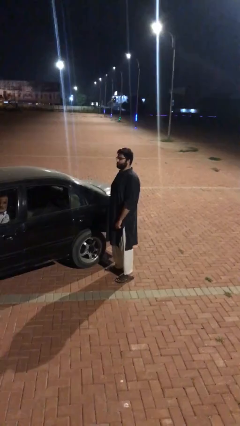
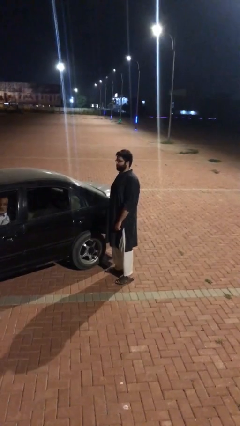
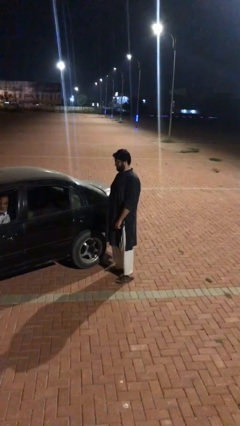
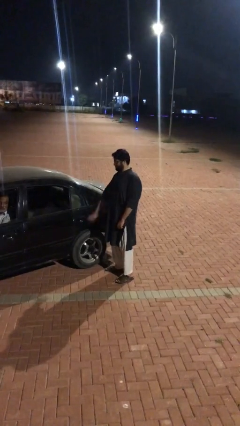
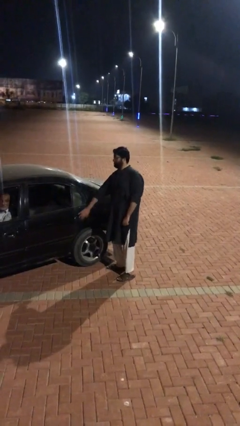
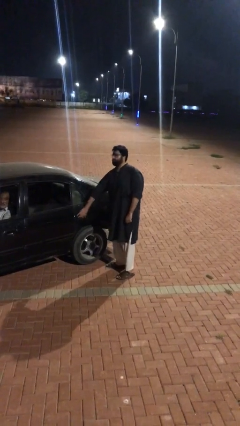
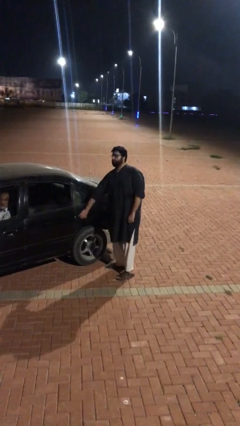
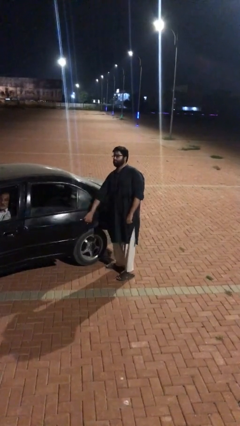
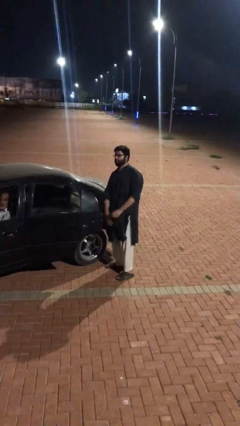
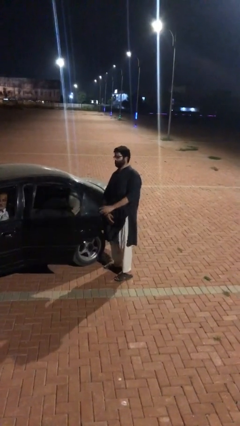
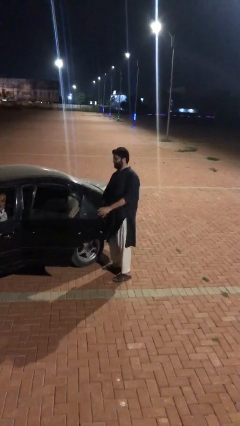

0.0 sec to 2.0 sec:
person opens car door

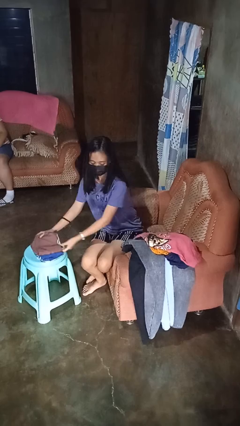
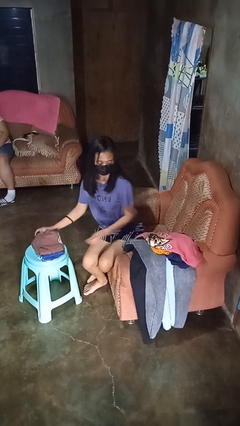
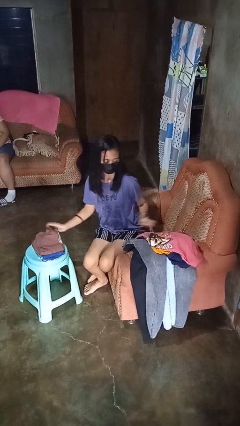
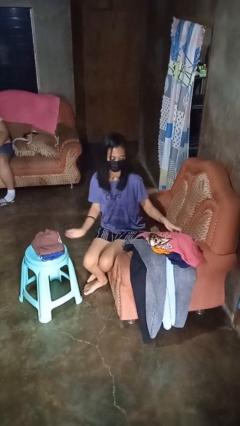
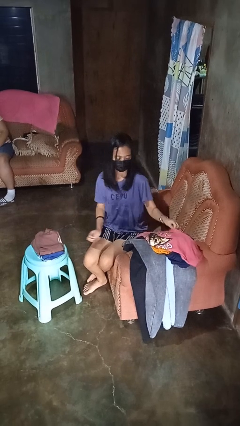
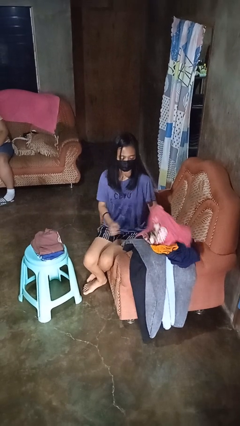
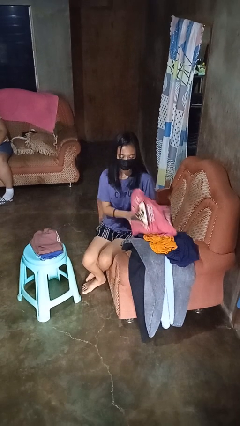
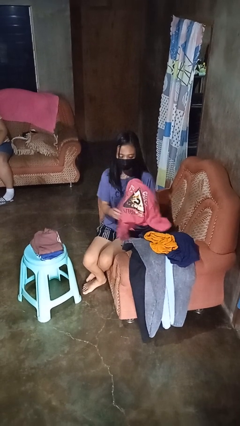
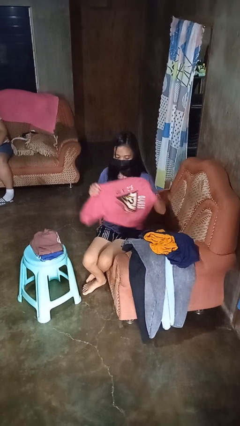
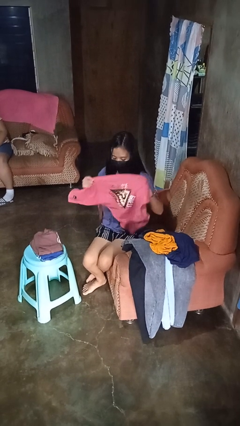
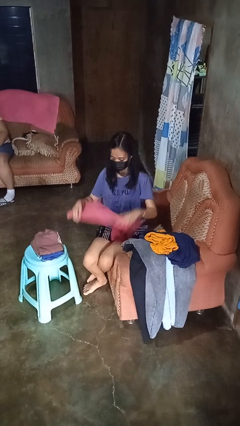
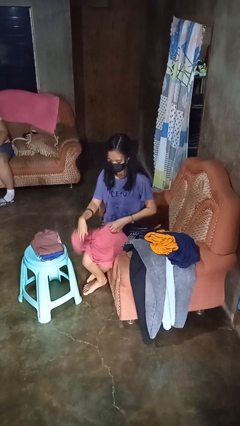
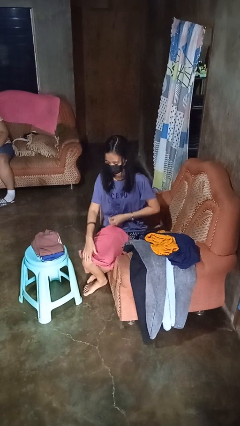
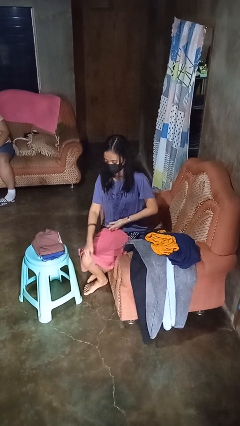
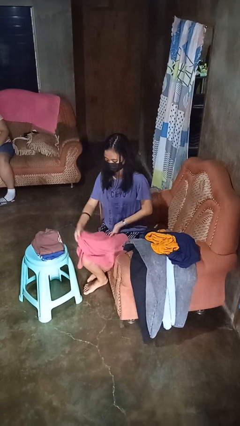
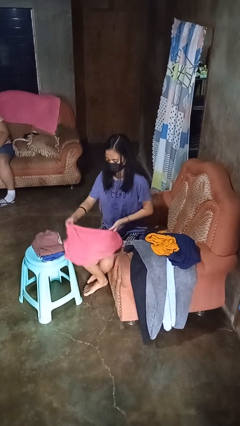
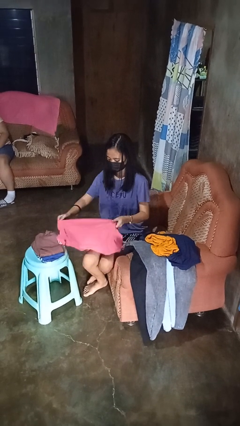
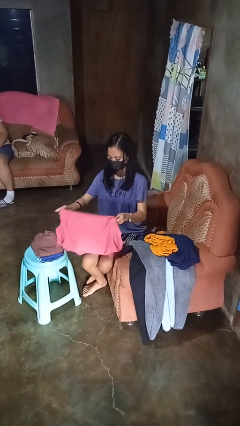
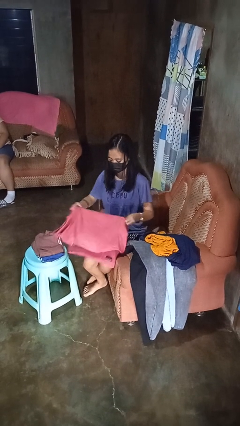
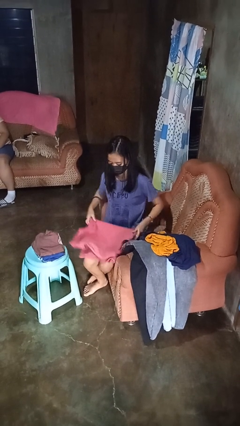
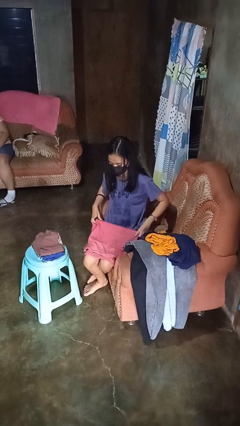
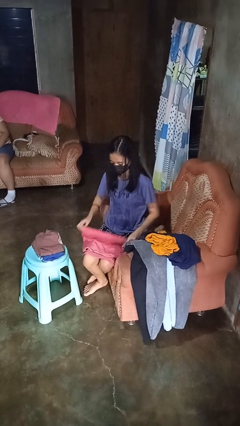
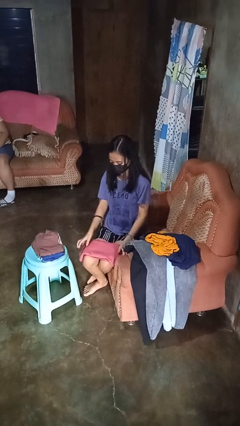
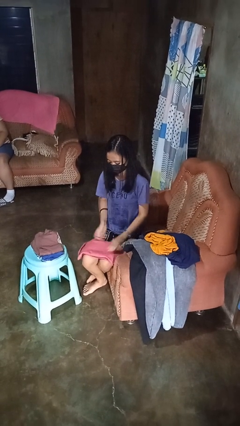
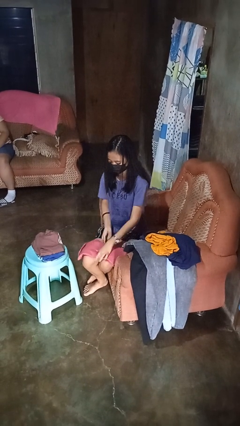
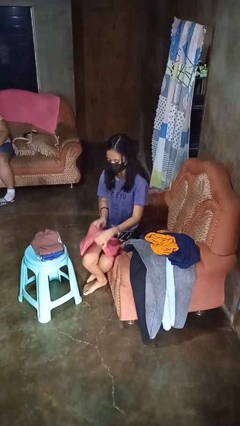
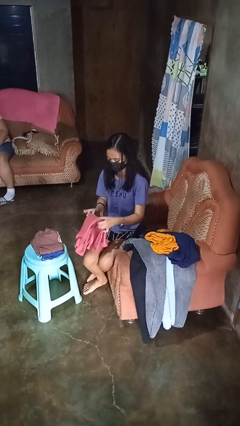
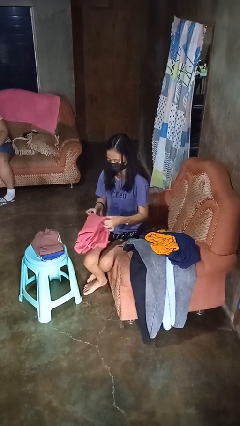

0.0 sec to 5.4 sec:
person folds shirt

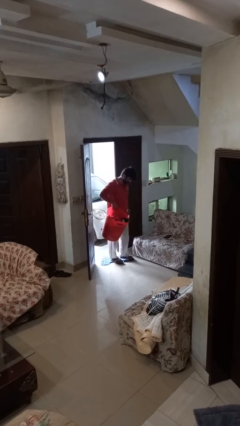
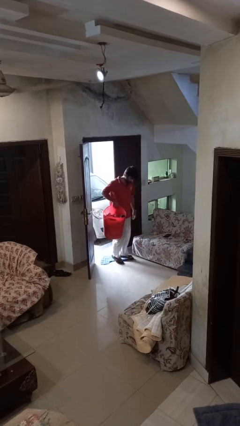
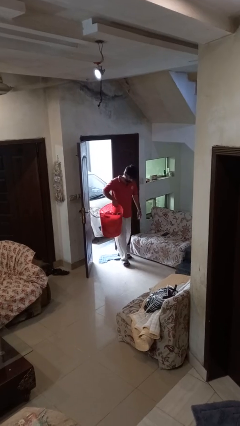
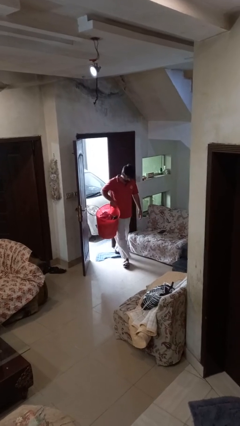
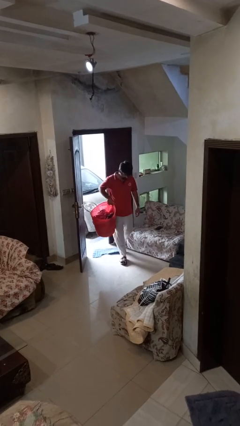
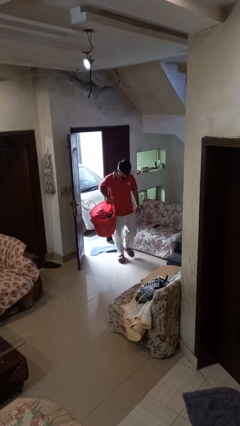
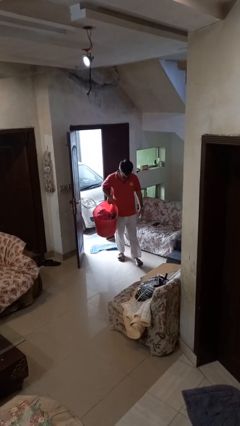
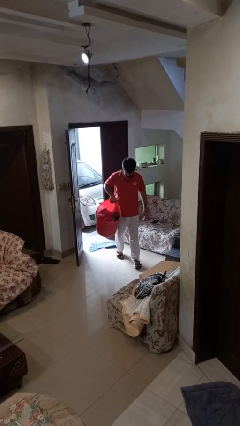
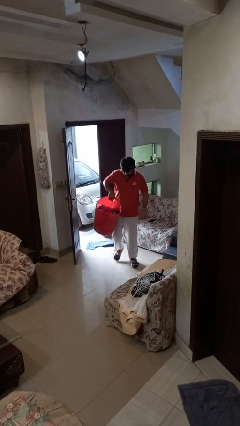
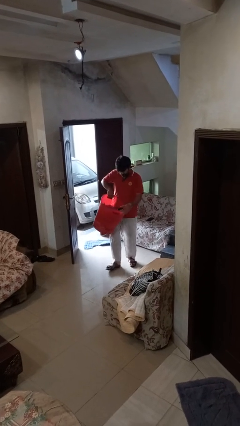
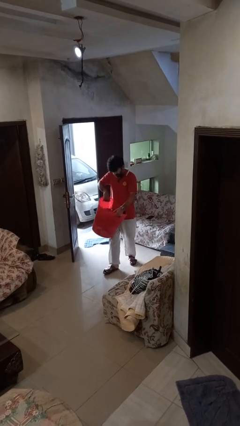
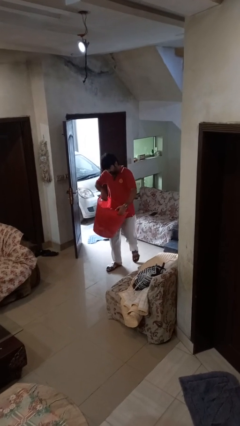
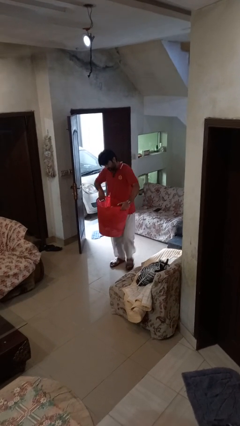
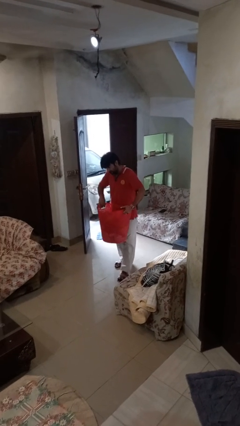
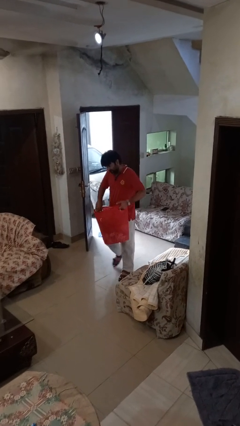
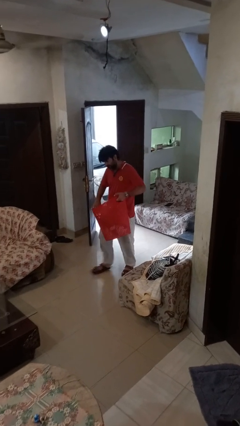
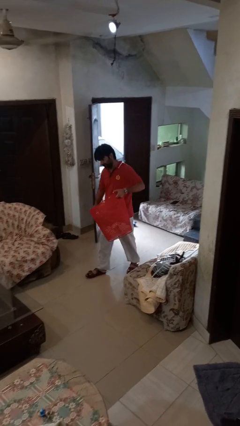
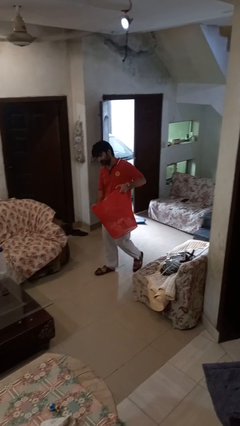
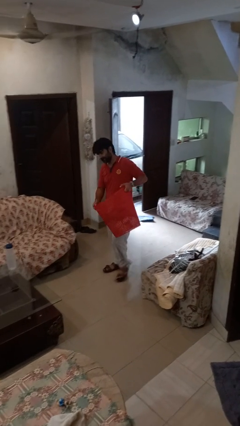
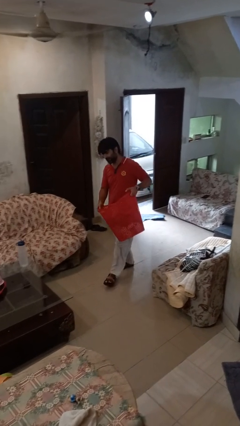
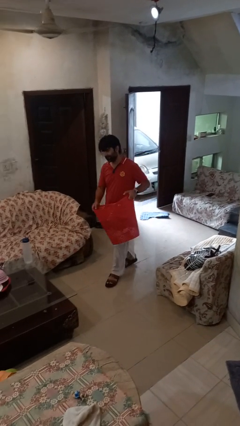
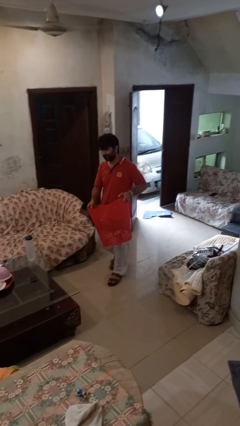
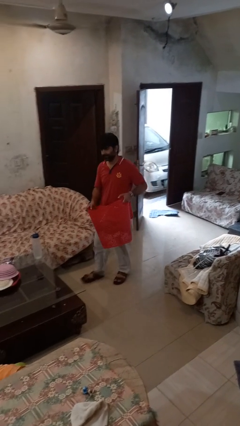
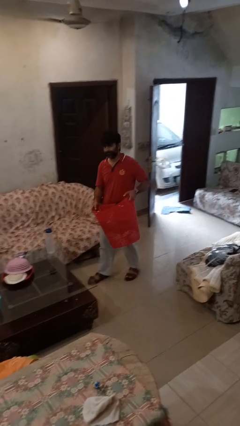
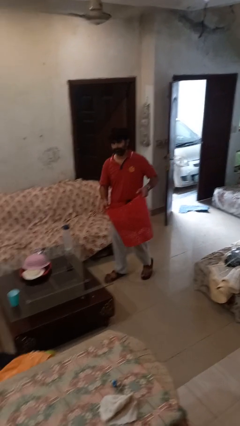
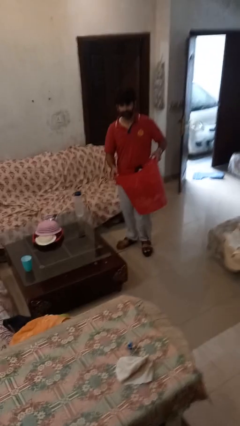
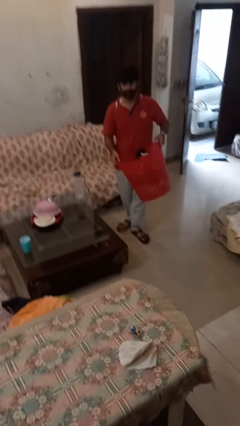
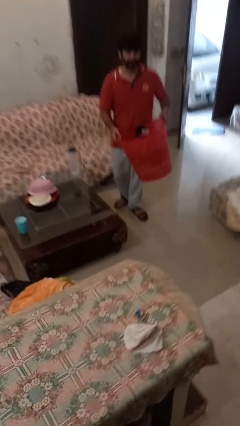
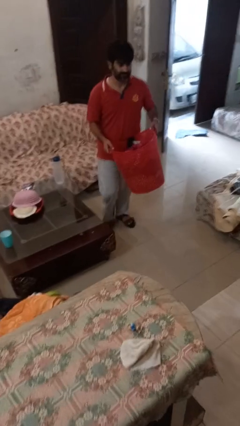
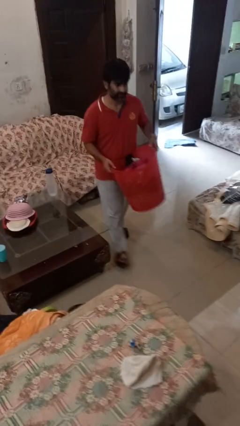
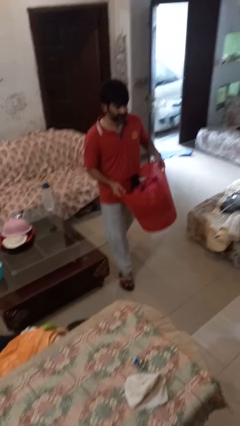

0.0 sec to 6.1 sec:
person carries laundry basket

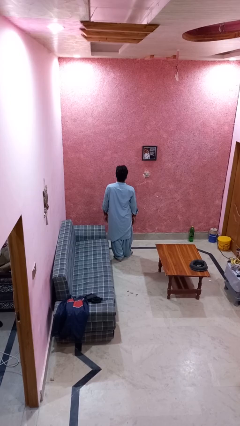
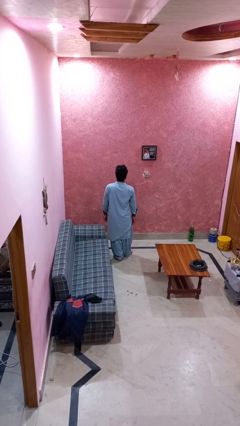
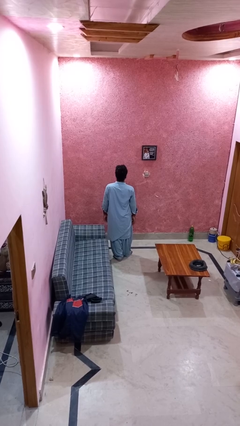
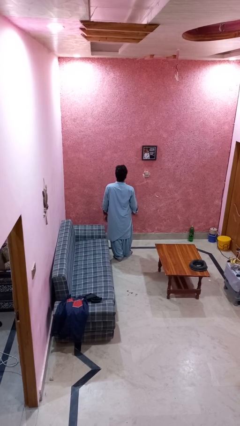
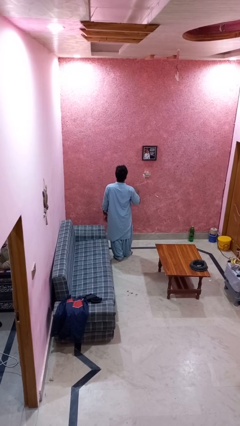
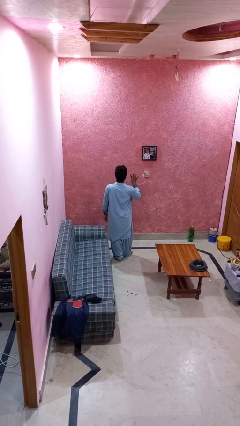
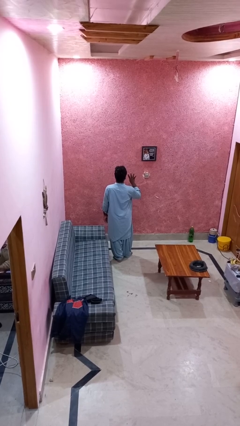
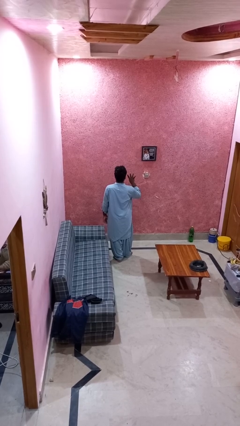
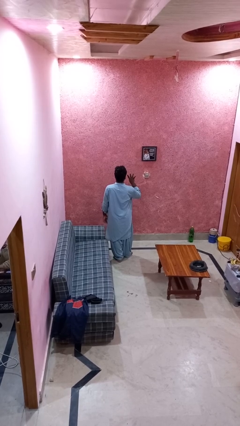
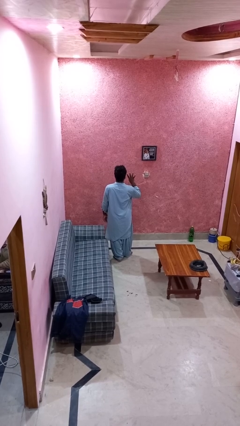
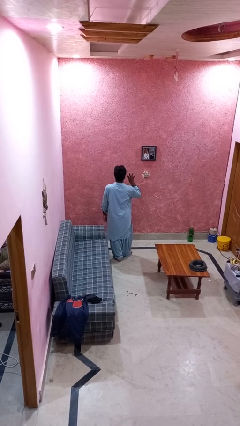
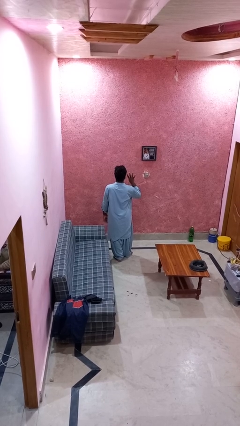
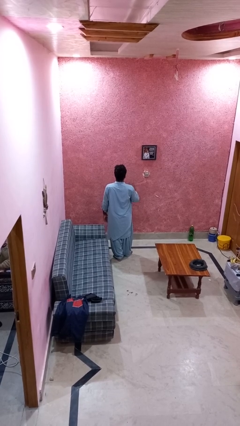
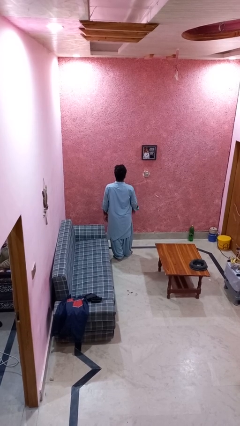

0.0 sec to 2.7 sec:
person gestures number four

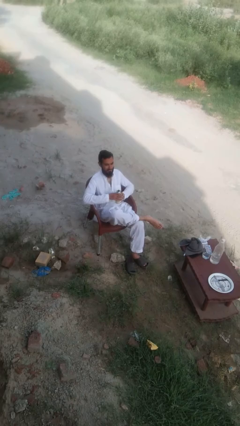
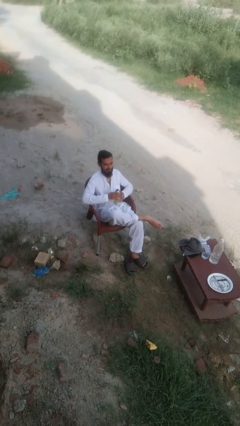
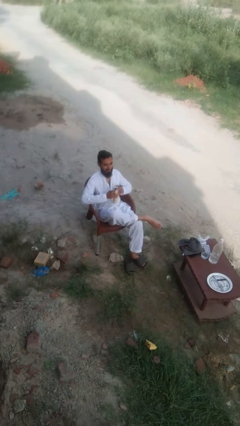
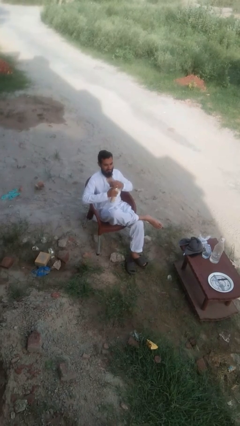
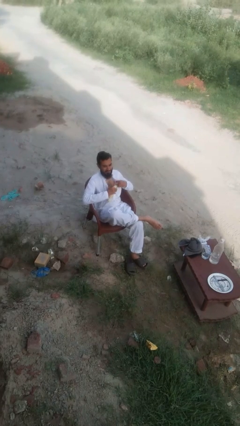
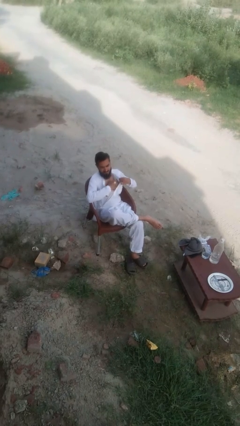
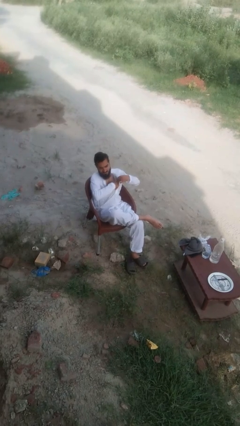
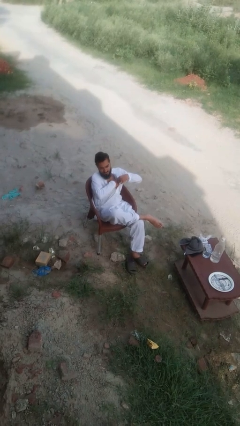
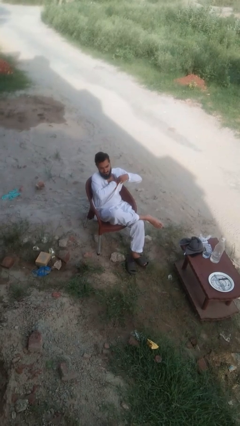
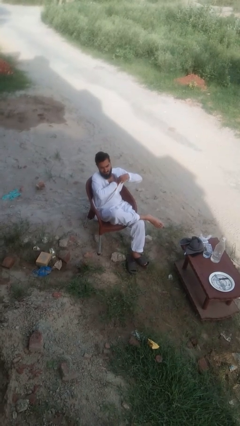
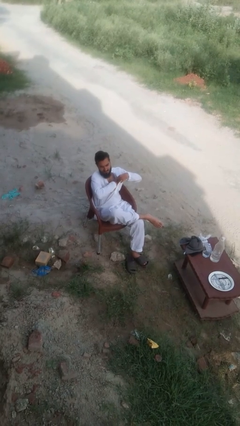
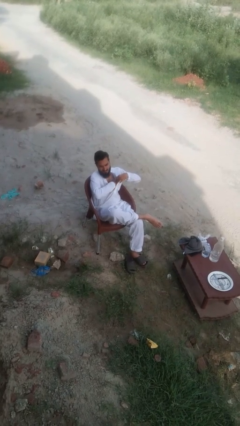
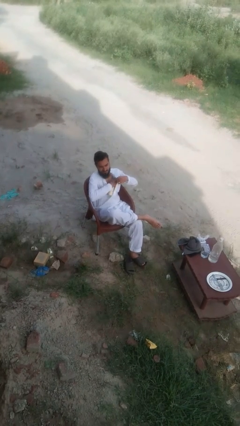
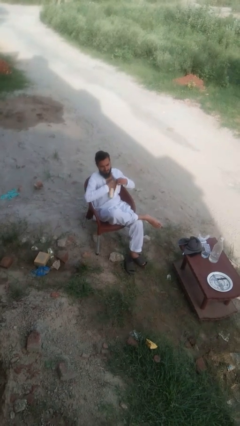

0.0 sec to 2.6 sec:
person applies deodorant
